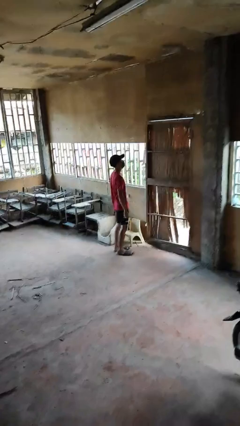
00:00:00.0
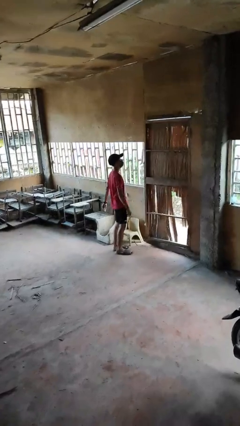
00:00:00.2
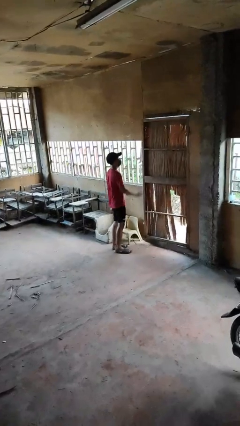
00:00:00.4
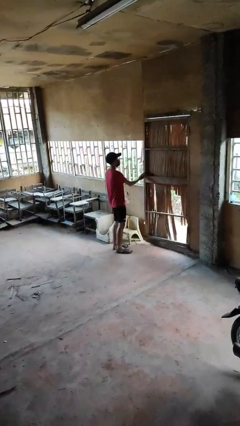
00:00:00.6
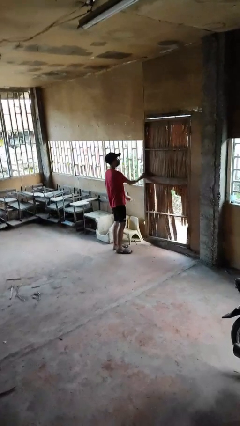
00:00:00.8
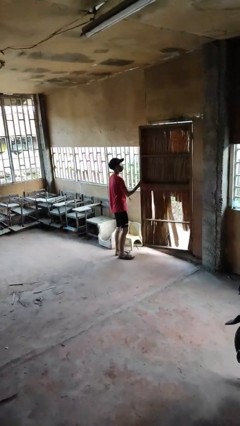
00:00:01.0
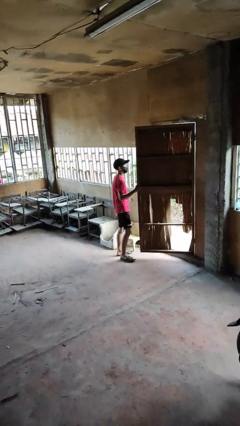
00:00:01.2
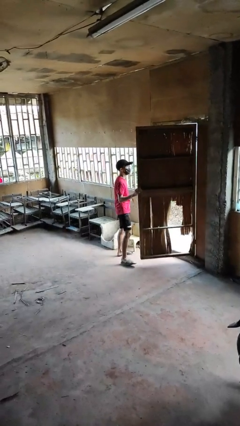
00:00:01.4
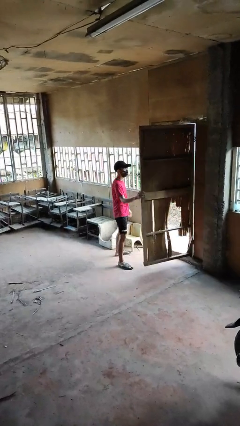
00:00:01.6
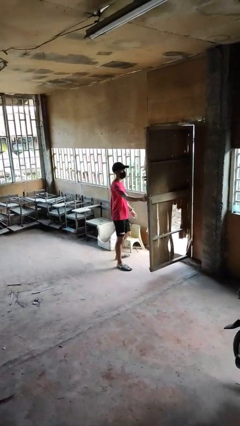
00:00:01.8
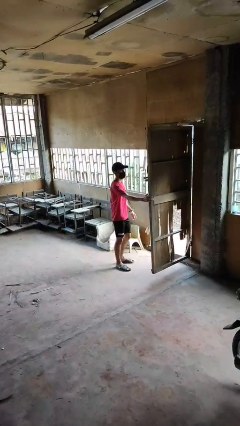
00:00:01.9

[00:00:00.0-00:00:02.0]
person opens facility door

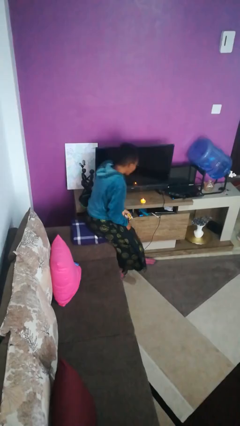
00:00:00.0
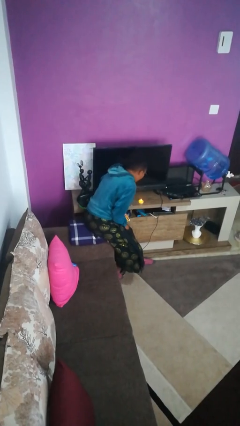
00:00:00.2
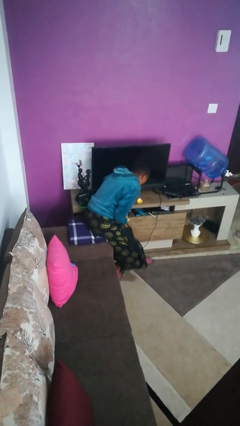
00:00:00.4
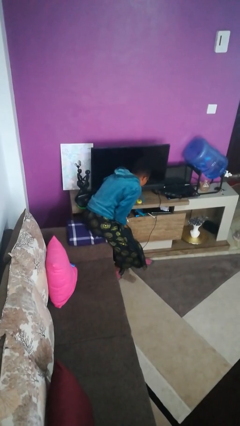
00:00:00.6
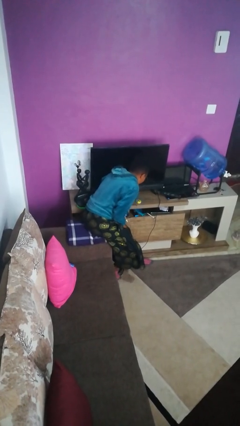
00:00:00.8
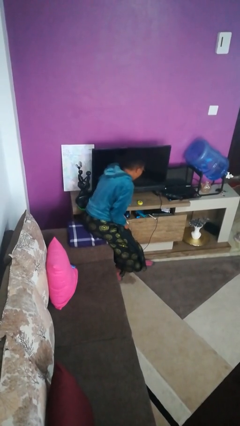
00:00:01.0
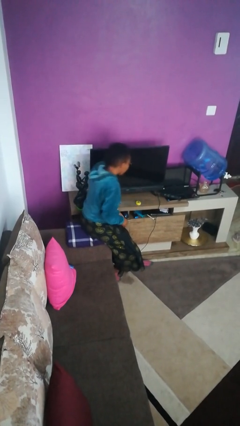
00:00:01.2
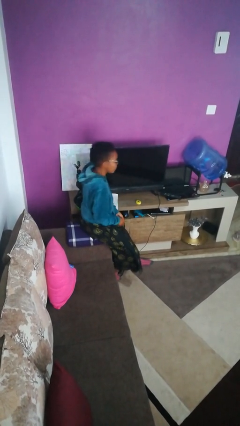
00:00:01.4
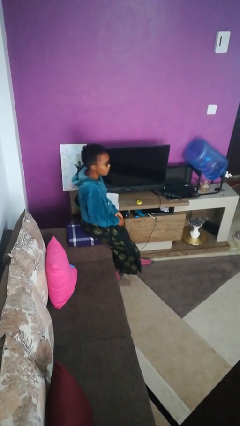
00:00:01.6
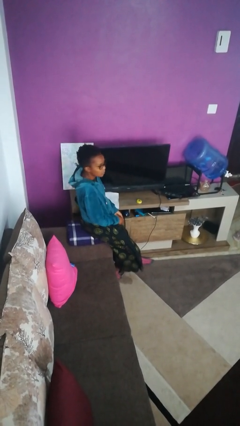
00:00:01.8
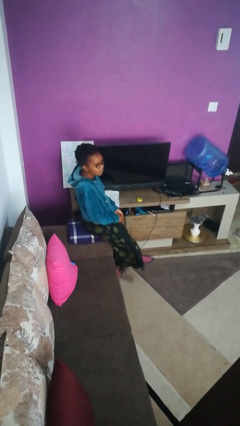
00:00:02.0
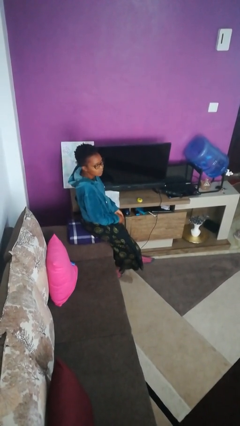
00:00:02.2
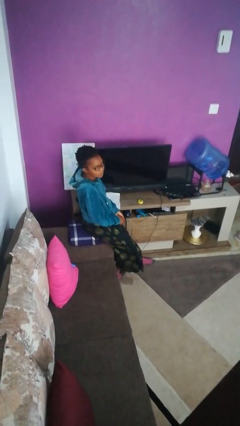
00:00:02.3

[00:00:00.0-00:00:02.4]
person extinguishes candle

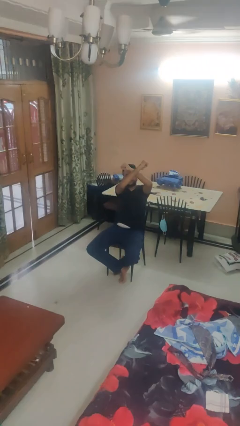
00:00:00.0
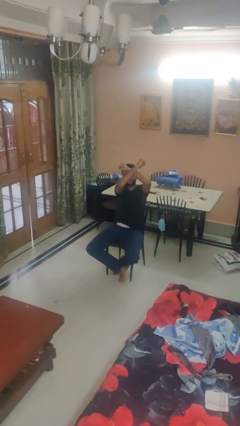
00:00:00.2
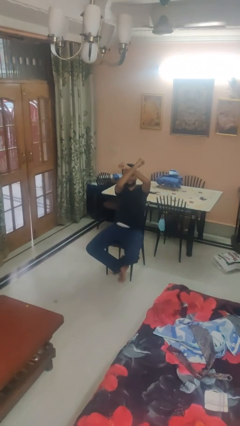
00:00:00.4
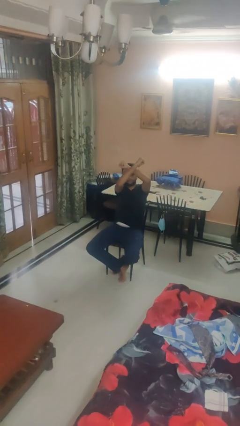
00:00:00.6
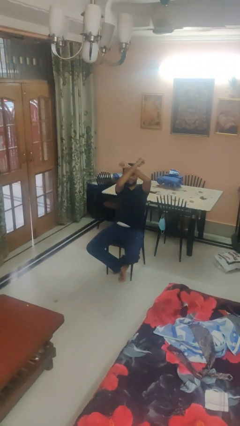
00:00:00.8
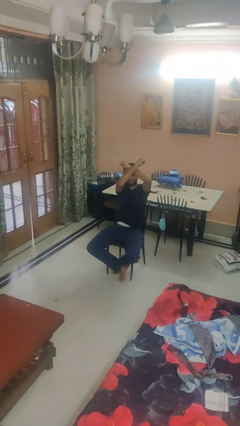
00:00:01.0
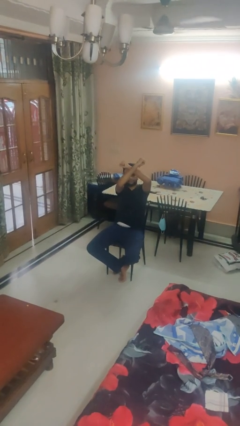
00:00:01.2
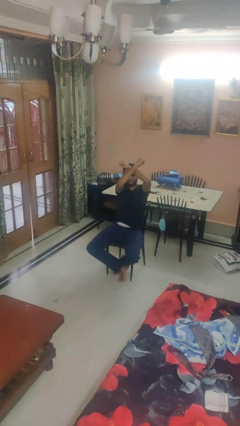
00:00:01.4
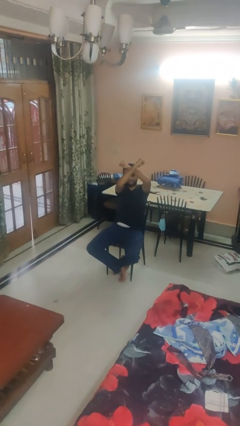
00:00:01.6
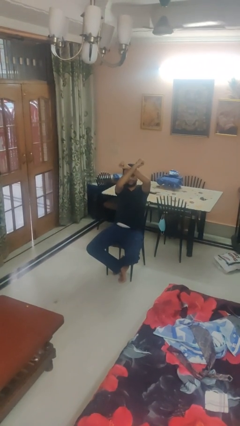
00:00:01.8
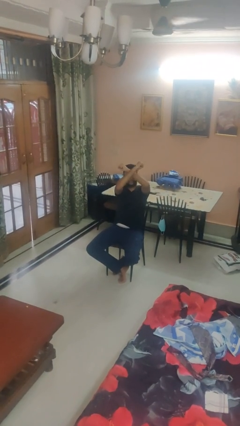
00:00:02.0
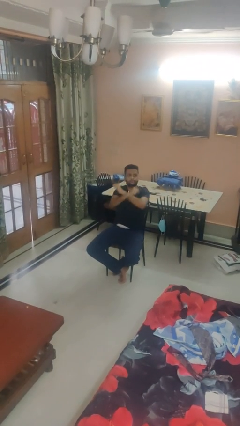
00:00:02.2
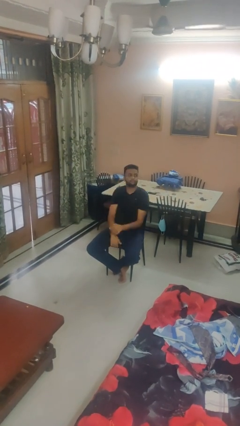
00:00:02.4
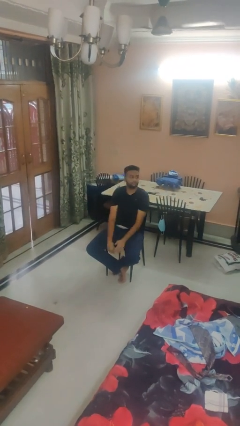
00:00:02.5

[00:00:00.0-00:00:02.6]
person gestures arms x

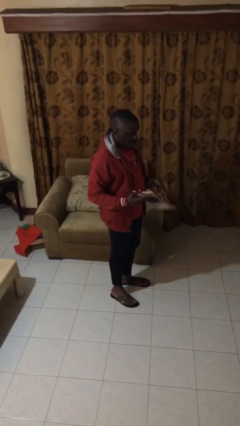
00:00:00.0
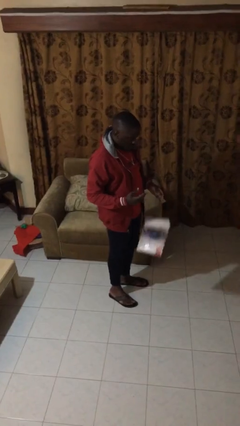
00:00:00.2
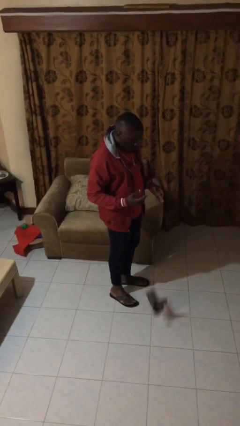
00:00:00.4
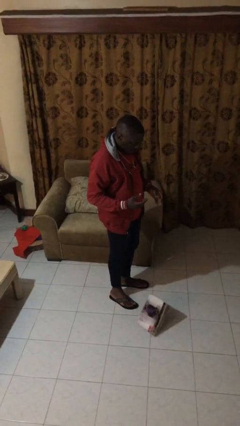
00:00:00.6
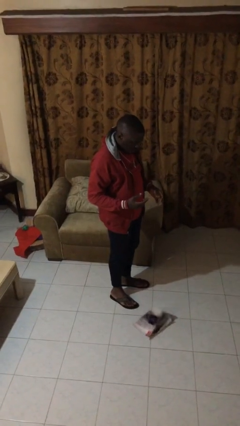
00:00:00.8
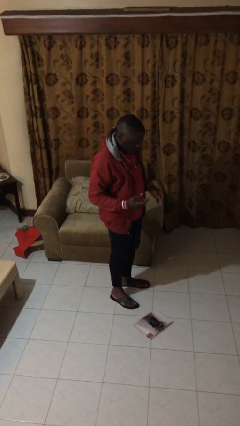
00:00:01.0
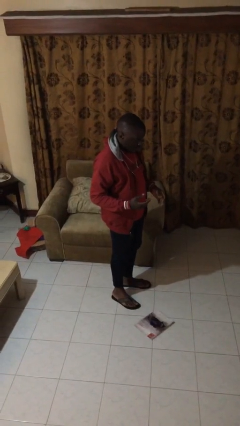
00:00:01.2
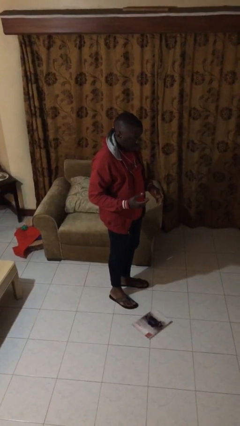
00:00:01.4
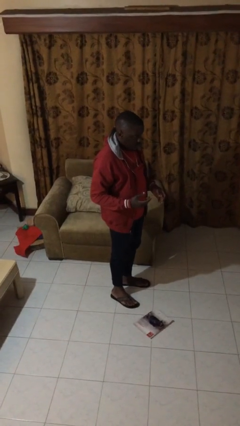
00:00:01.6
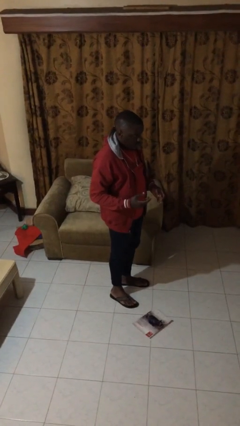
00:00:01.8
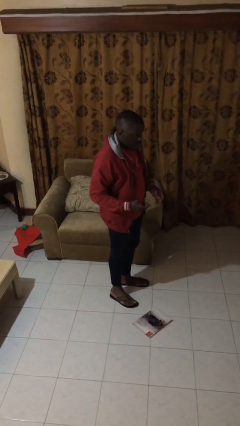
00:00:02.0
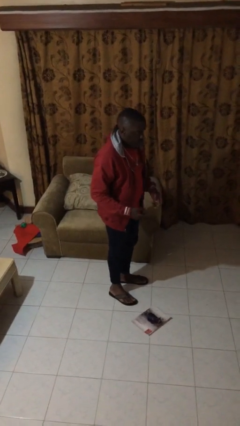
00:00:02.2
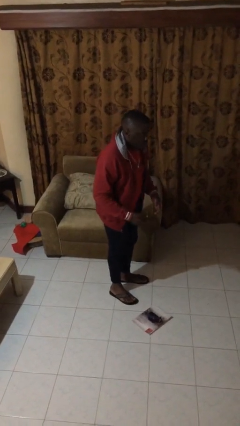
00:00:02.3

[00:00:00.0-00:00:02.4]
person drops object

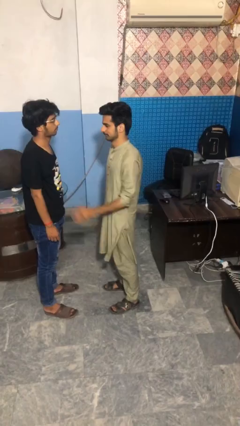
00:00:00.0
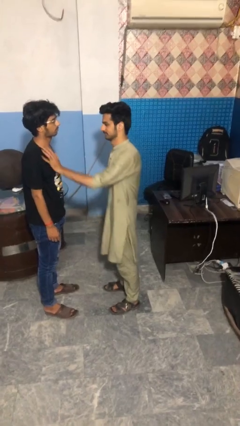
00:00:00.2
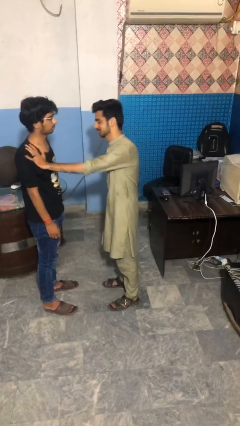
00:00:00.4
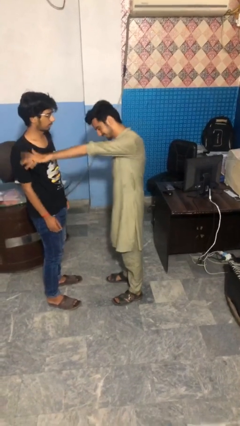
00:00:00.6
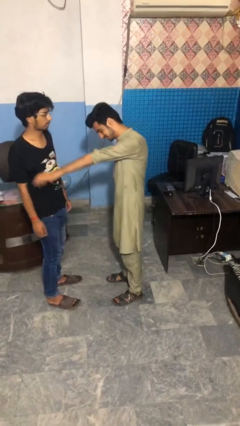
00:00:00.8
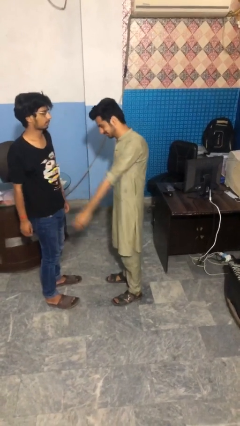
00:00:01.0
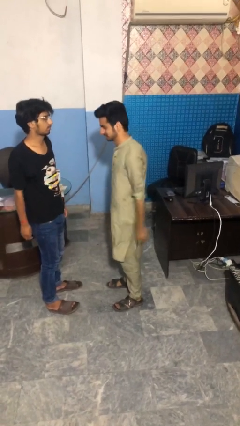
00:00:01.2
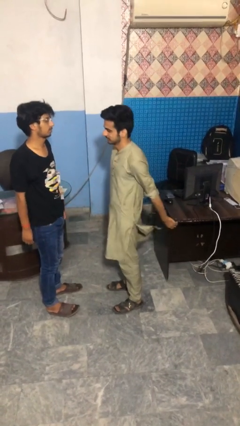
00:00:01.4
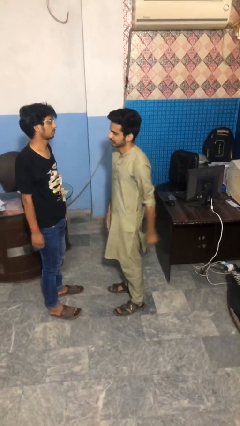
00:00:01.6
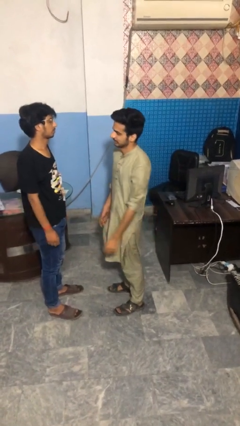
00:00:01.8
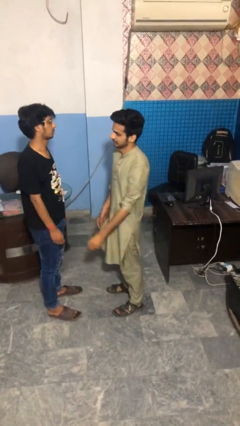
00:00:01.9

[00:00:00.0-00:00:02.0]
person shoves person

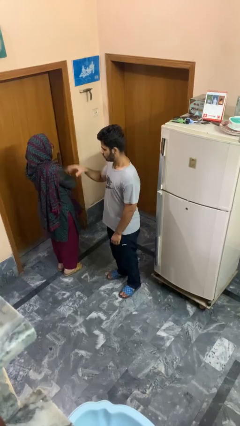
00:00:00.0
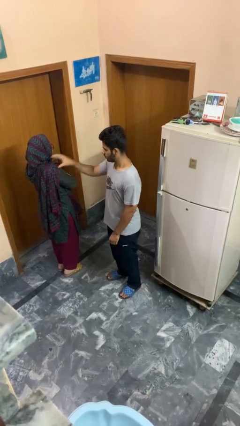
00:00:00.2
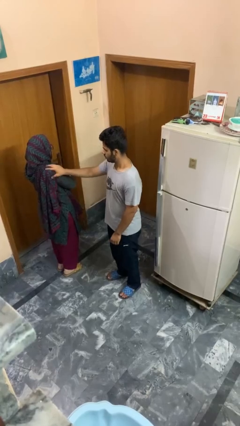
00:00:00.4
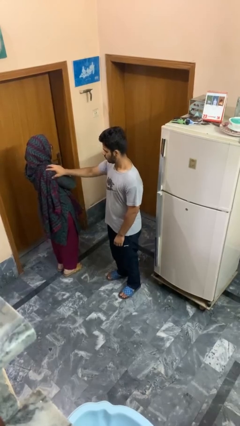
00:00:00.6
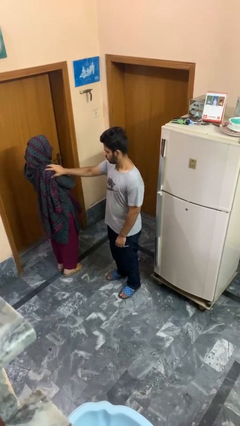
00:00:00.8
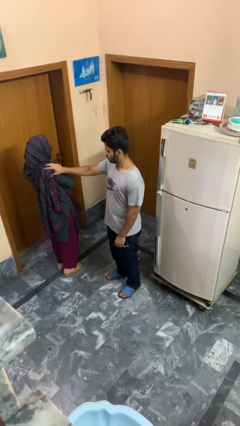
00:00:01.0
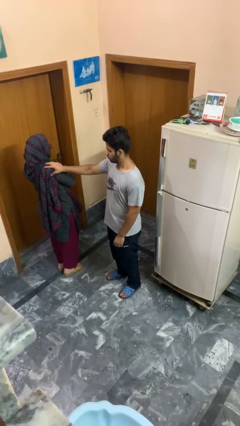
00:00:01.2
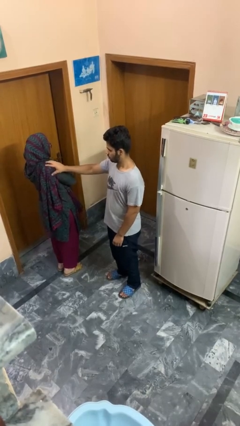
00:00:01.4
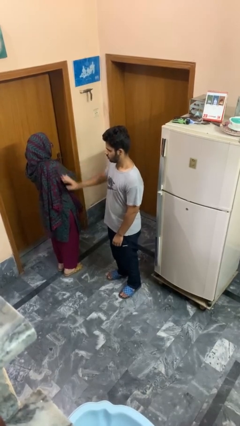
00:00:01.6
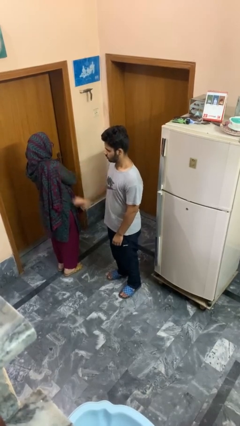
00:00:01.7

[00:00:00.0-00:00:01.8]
person pounds shoulders of person

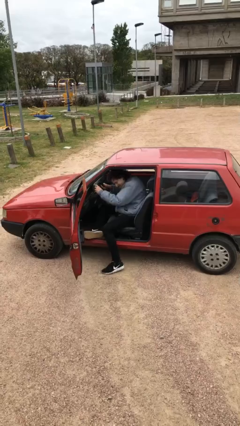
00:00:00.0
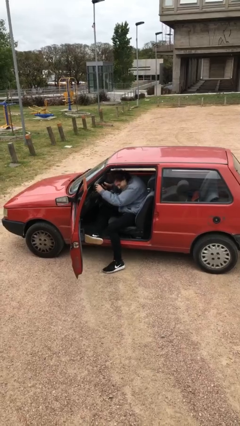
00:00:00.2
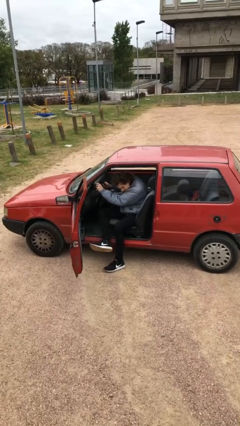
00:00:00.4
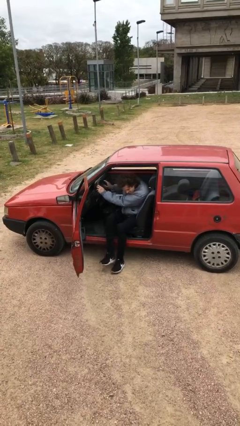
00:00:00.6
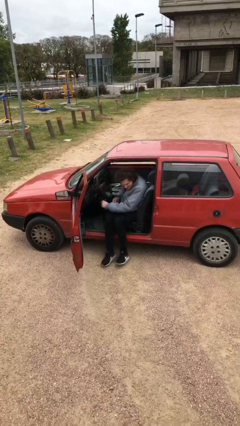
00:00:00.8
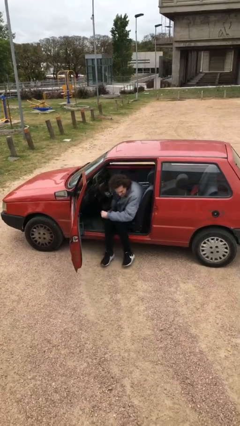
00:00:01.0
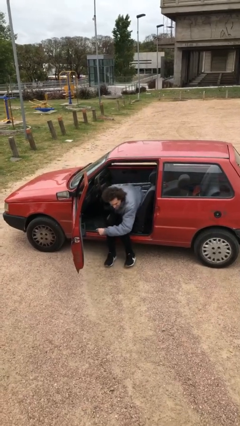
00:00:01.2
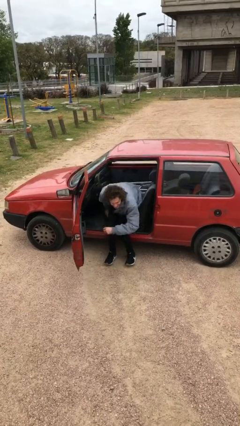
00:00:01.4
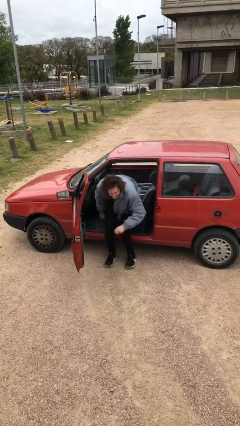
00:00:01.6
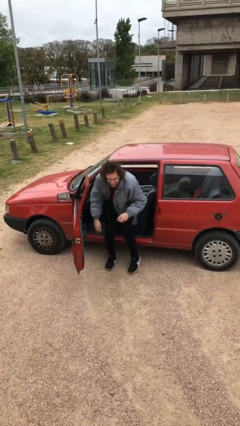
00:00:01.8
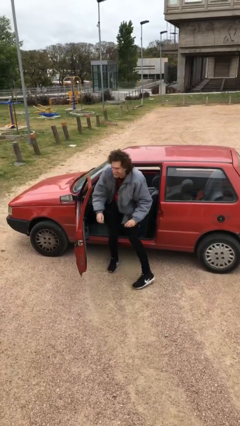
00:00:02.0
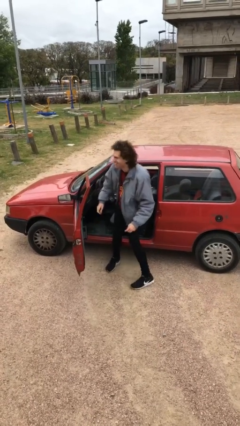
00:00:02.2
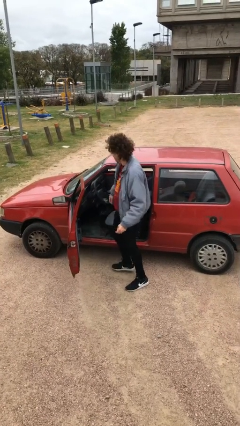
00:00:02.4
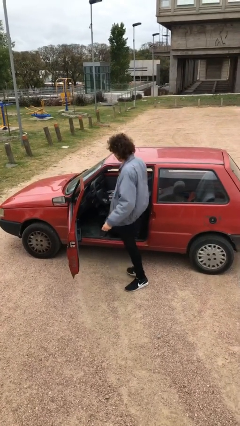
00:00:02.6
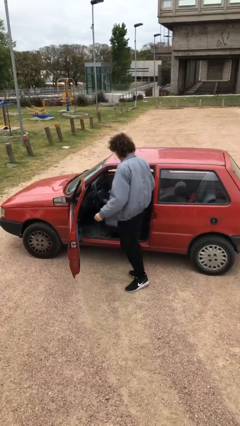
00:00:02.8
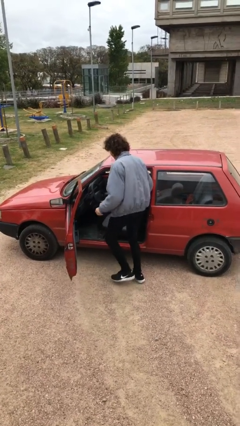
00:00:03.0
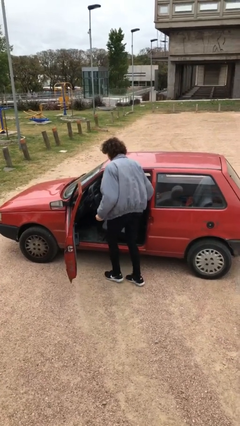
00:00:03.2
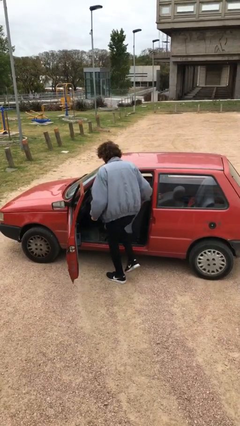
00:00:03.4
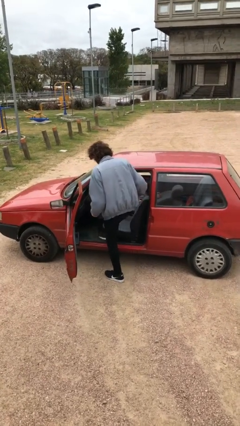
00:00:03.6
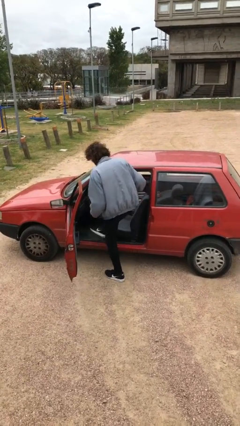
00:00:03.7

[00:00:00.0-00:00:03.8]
person exits car
